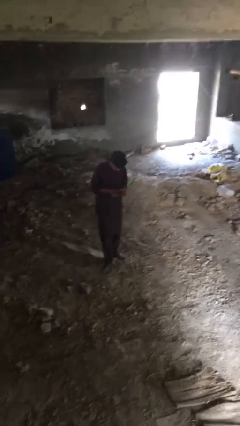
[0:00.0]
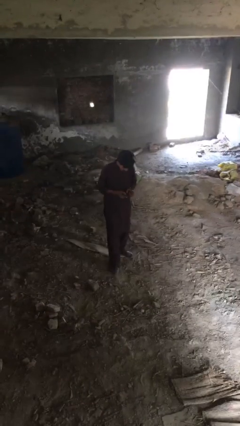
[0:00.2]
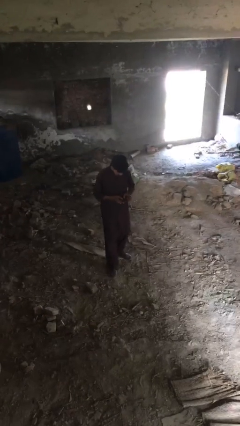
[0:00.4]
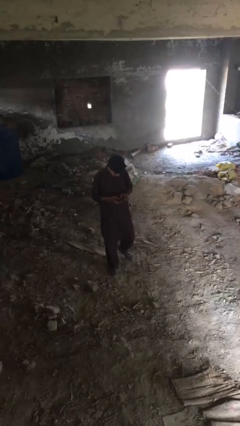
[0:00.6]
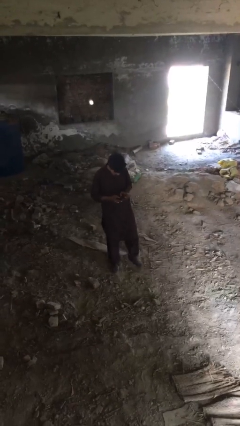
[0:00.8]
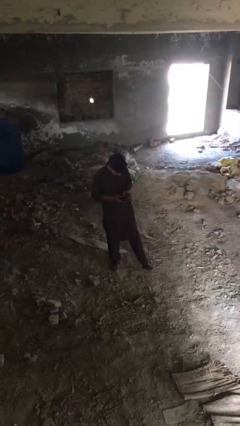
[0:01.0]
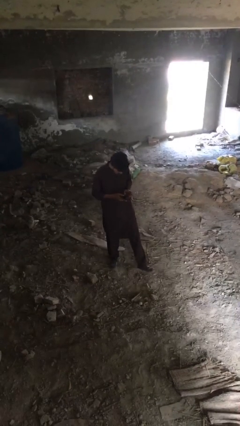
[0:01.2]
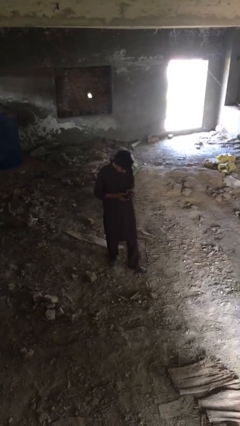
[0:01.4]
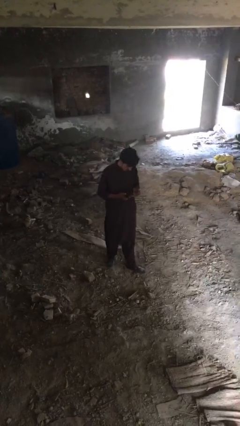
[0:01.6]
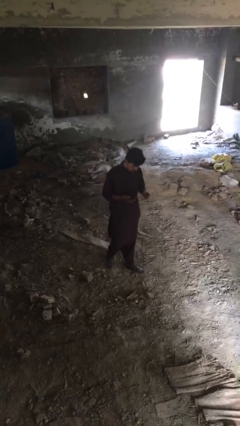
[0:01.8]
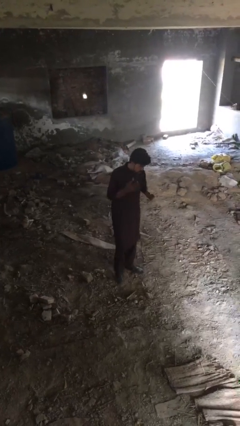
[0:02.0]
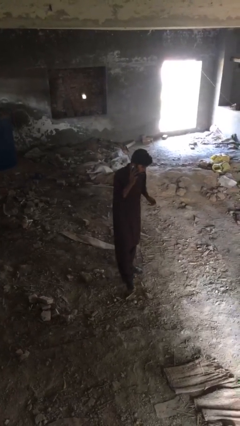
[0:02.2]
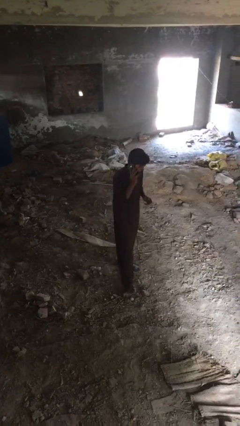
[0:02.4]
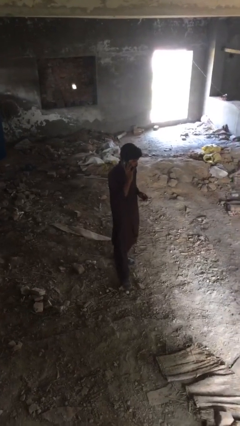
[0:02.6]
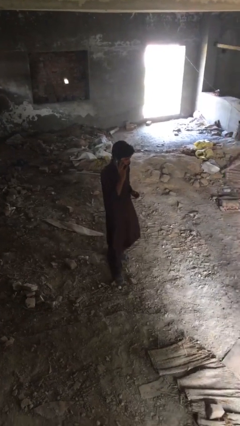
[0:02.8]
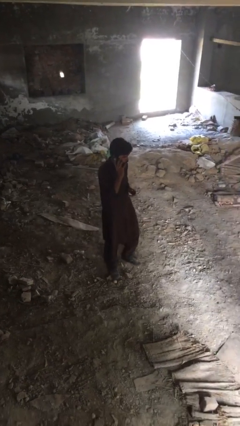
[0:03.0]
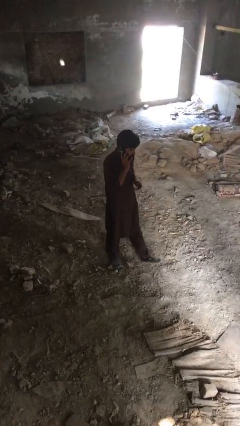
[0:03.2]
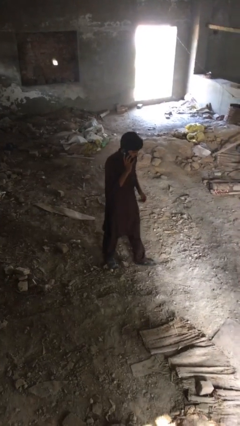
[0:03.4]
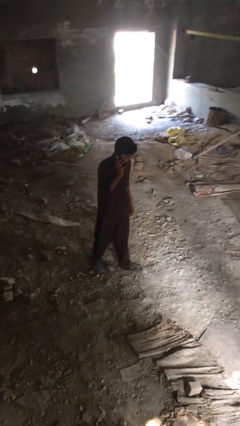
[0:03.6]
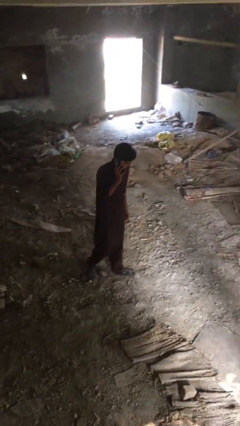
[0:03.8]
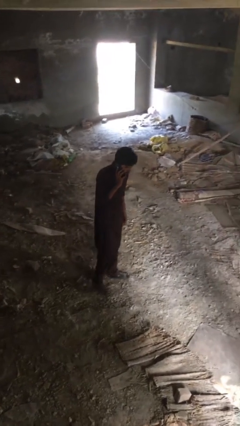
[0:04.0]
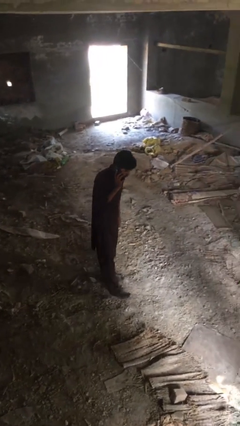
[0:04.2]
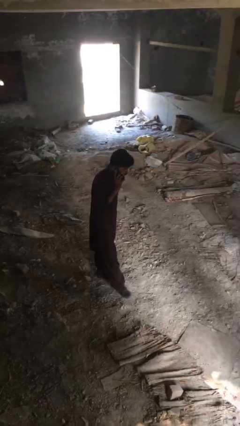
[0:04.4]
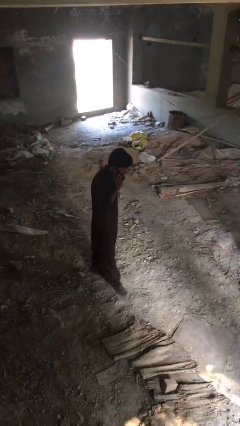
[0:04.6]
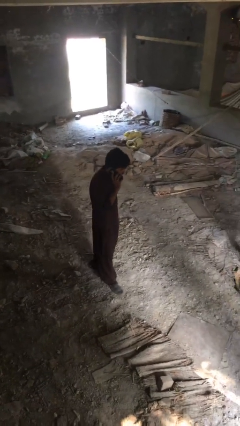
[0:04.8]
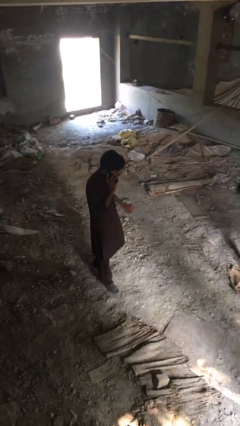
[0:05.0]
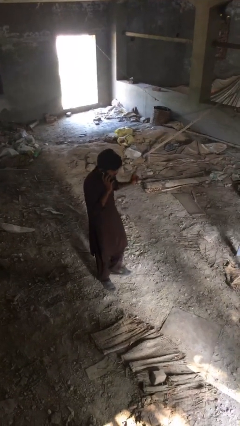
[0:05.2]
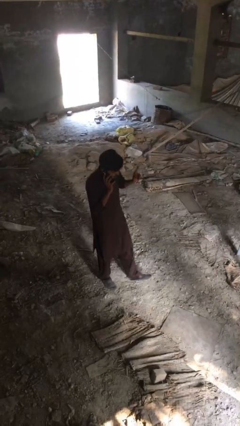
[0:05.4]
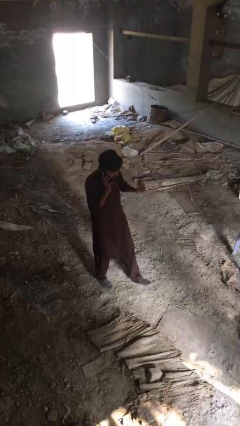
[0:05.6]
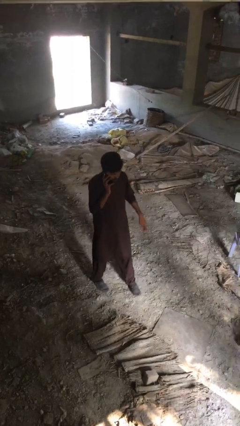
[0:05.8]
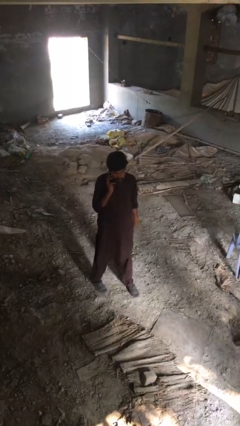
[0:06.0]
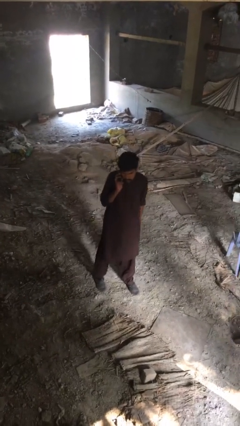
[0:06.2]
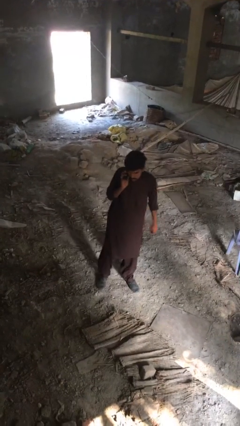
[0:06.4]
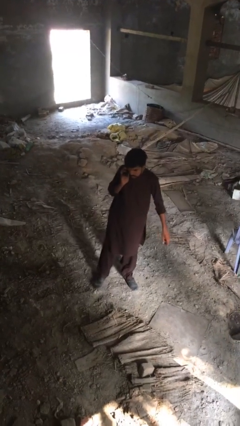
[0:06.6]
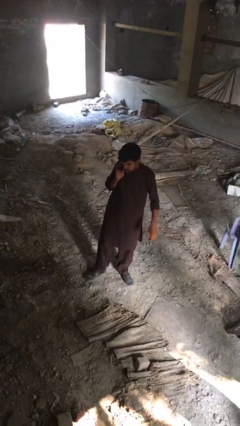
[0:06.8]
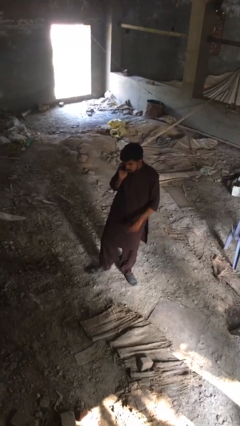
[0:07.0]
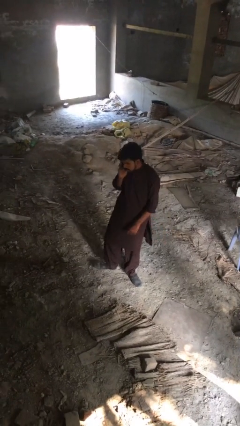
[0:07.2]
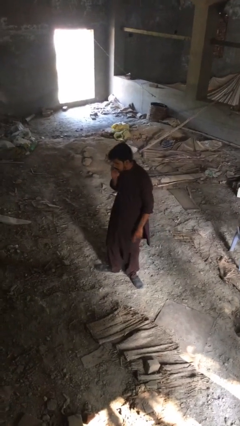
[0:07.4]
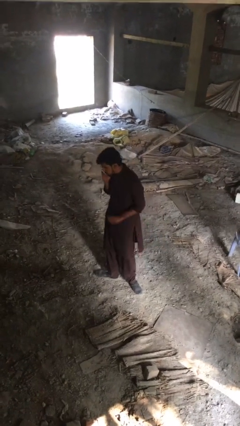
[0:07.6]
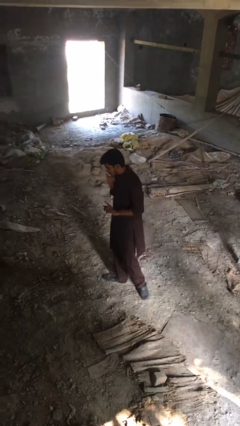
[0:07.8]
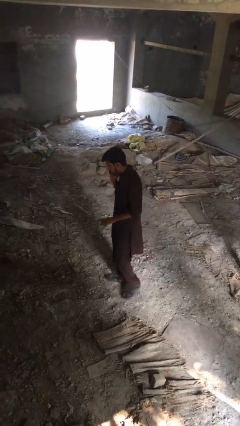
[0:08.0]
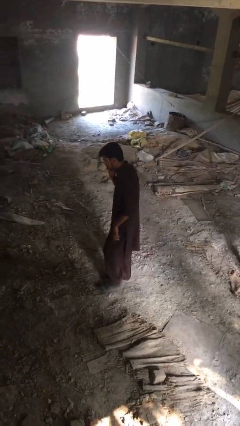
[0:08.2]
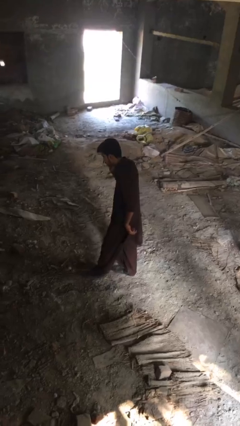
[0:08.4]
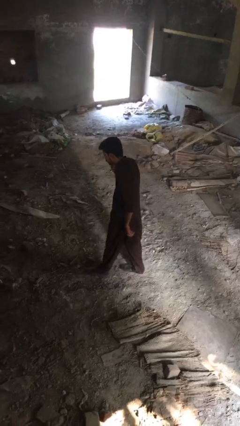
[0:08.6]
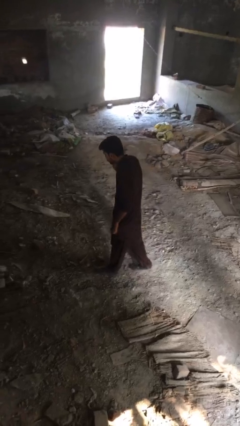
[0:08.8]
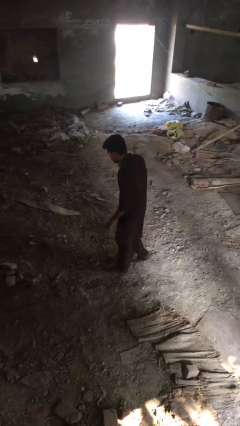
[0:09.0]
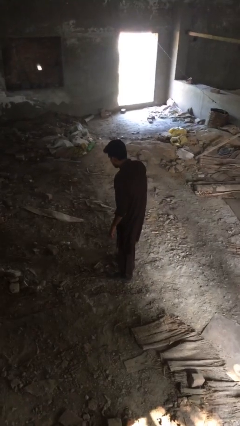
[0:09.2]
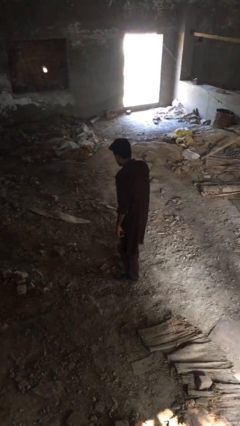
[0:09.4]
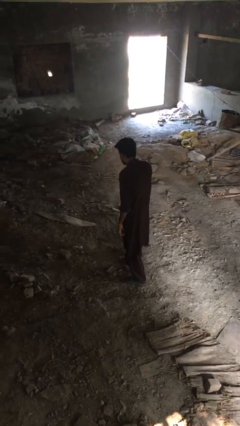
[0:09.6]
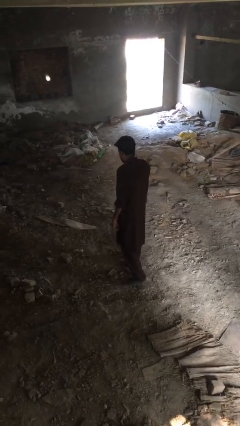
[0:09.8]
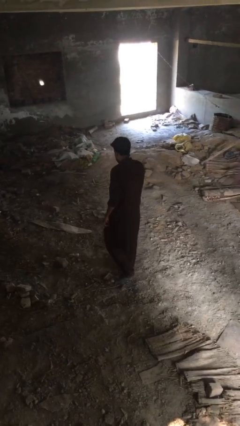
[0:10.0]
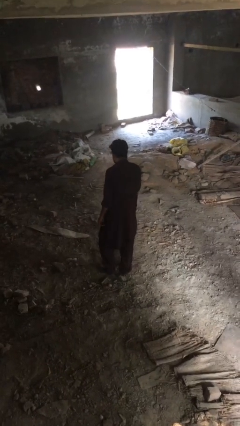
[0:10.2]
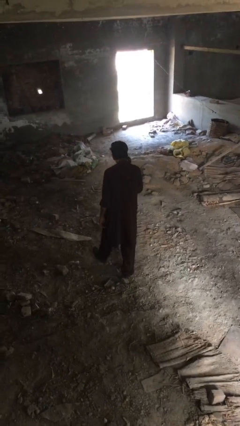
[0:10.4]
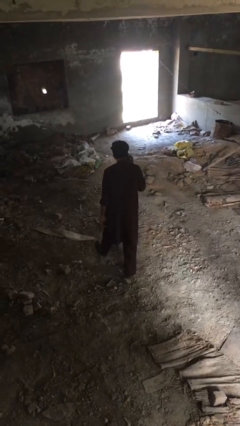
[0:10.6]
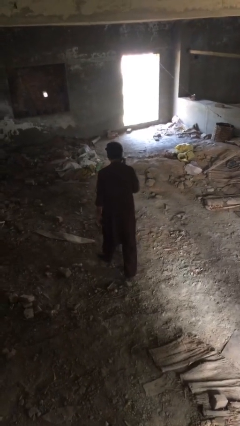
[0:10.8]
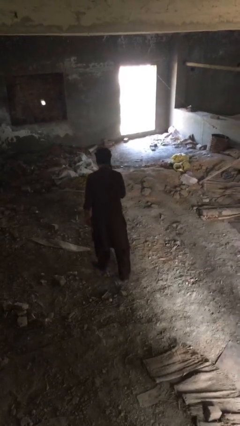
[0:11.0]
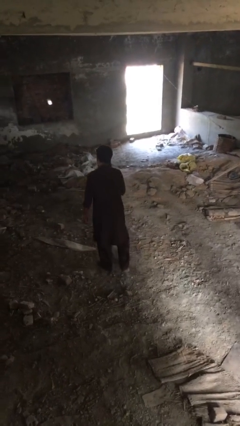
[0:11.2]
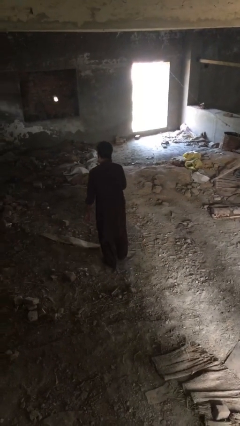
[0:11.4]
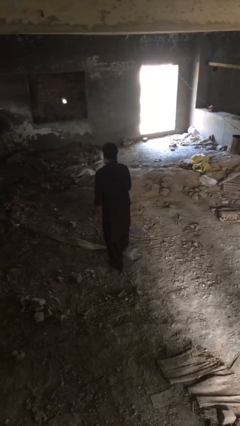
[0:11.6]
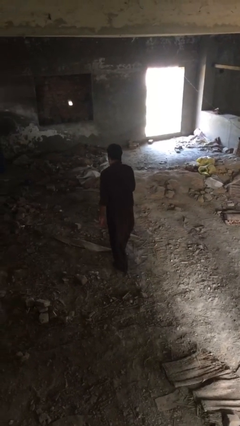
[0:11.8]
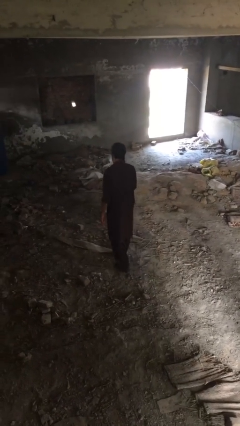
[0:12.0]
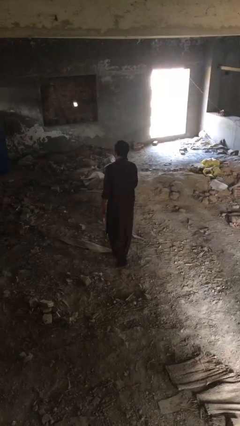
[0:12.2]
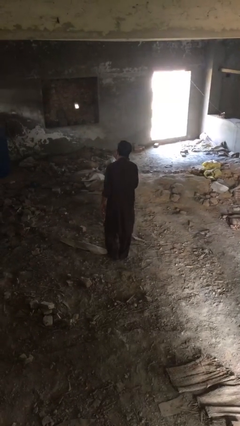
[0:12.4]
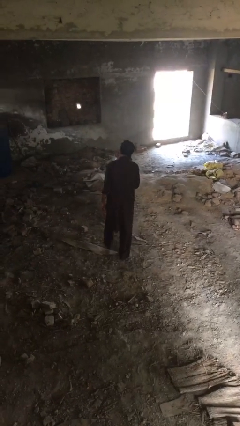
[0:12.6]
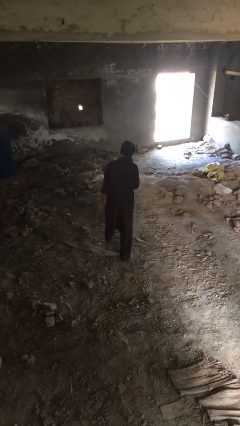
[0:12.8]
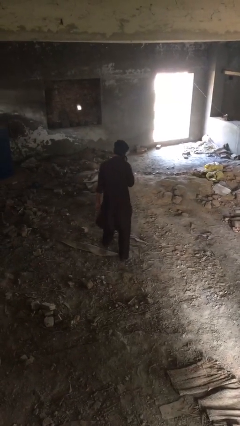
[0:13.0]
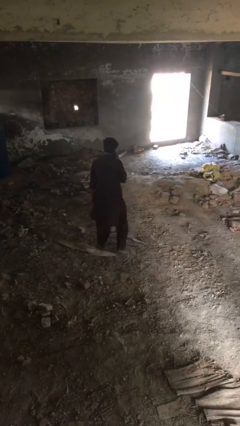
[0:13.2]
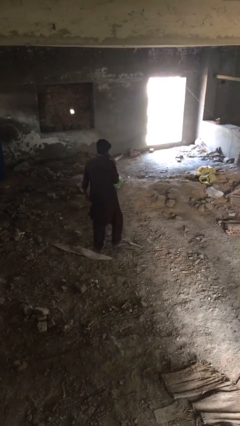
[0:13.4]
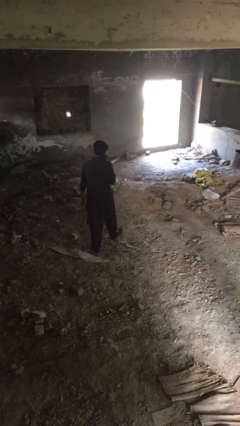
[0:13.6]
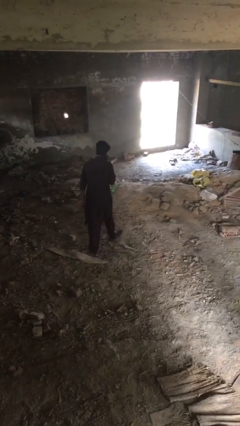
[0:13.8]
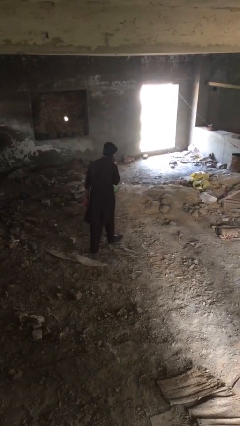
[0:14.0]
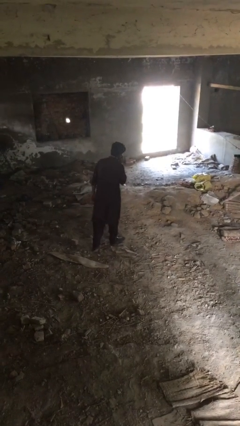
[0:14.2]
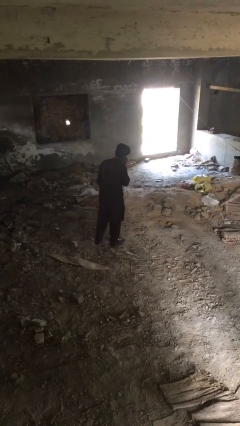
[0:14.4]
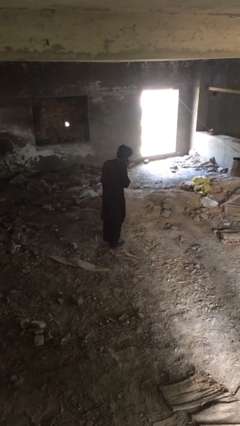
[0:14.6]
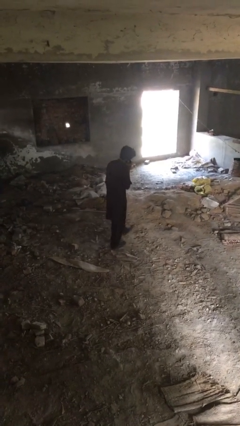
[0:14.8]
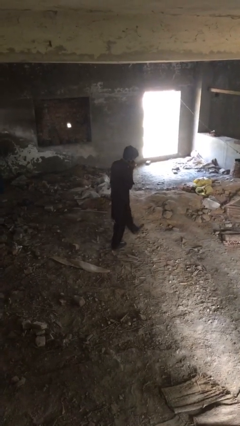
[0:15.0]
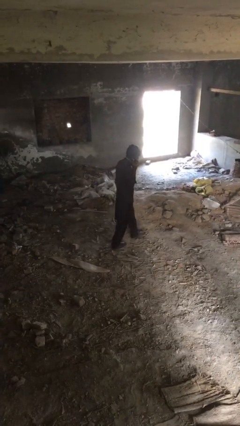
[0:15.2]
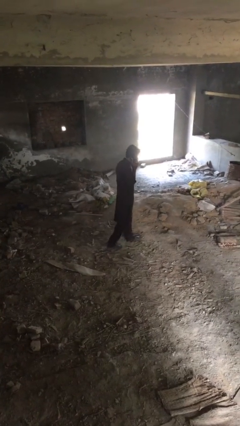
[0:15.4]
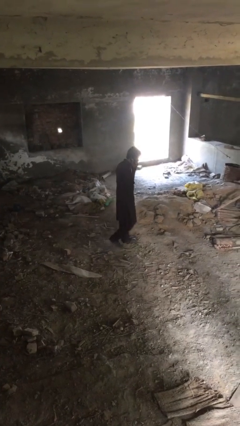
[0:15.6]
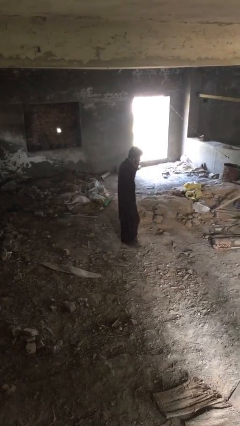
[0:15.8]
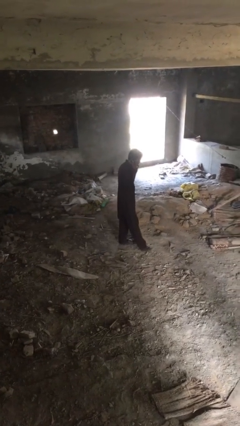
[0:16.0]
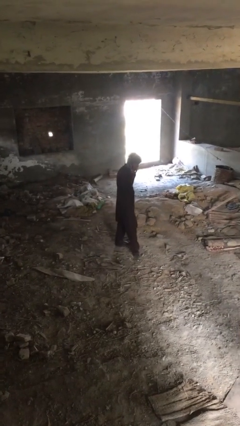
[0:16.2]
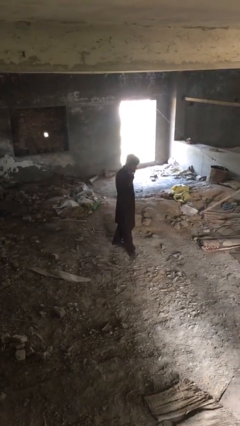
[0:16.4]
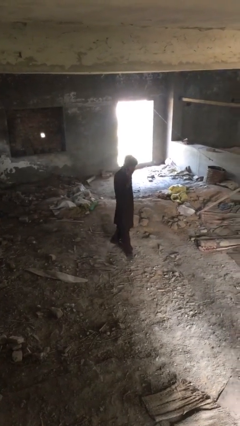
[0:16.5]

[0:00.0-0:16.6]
person talks on phone

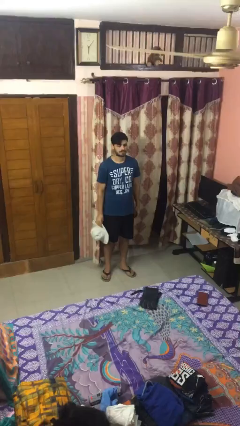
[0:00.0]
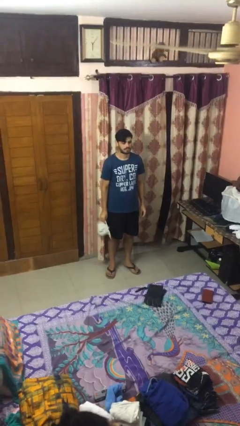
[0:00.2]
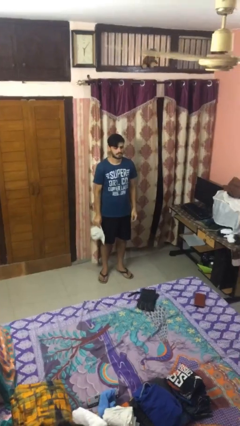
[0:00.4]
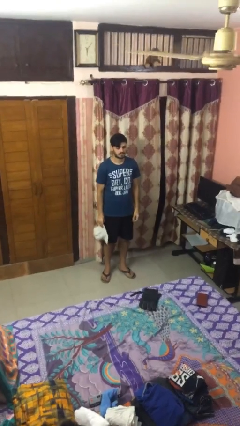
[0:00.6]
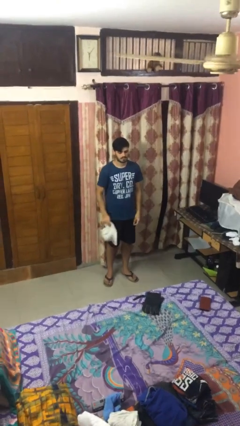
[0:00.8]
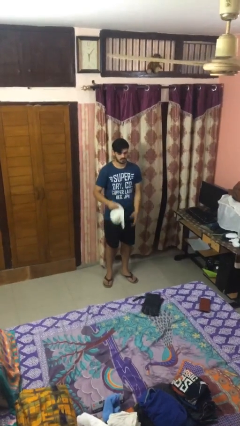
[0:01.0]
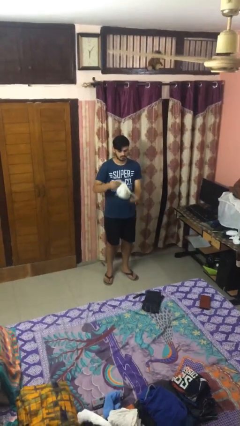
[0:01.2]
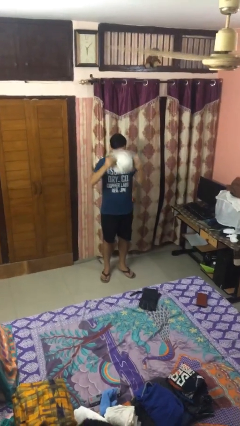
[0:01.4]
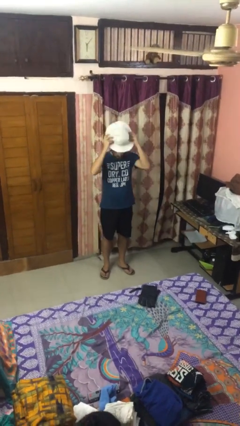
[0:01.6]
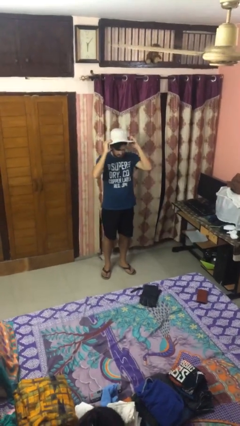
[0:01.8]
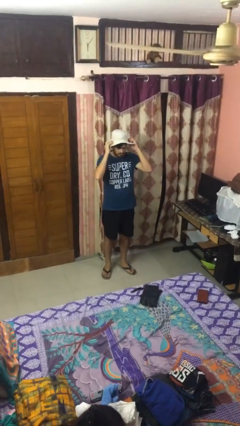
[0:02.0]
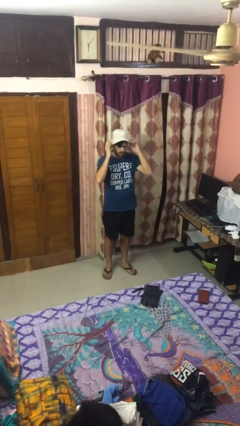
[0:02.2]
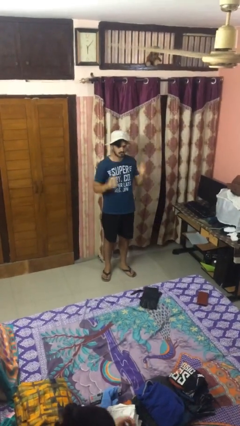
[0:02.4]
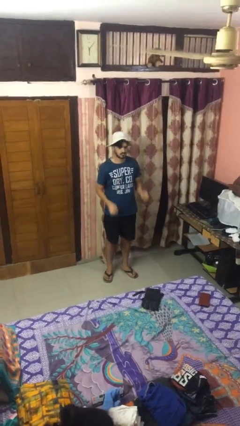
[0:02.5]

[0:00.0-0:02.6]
person puts on hat
